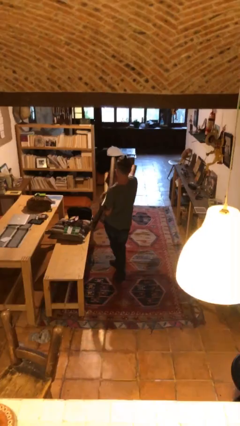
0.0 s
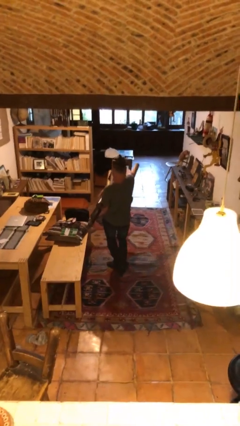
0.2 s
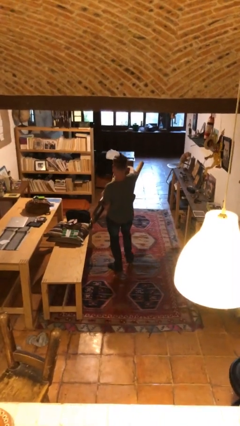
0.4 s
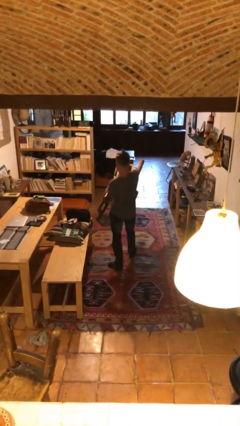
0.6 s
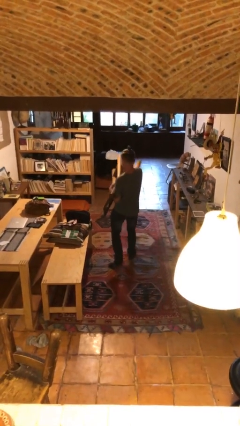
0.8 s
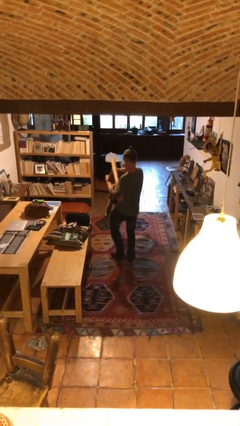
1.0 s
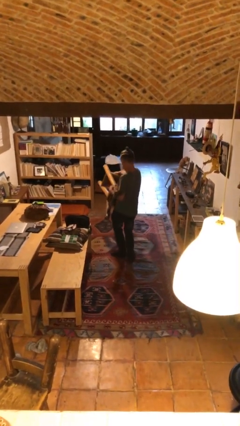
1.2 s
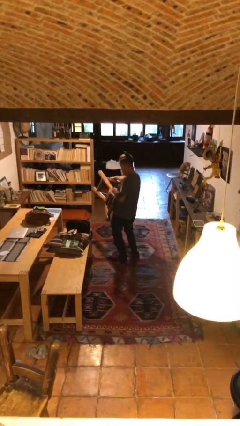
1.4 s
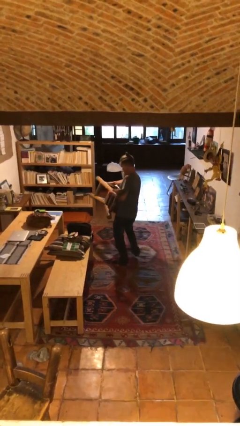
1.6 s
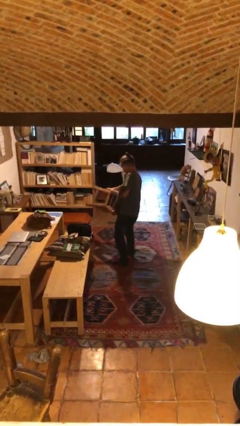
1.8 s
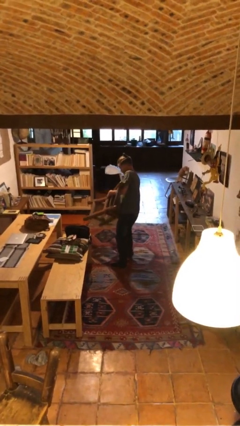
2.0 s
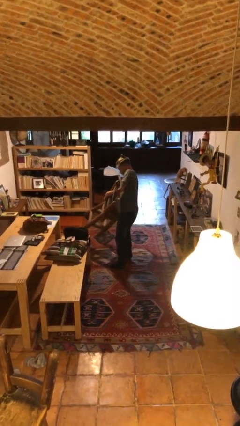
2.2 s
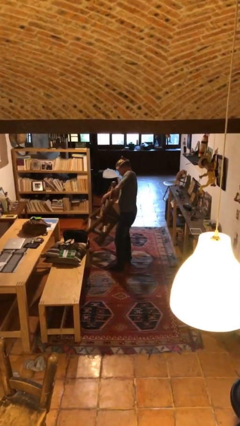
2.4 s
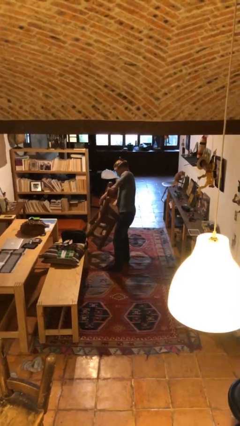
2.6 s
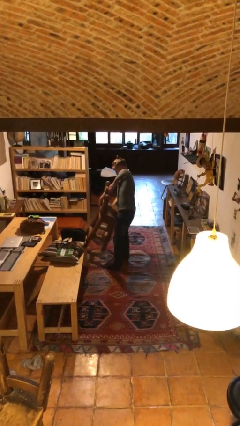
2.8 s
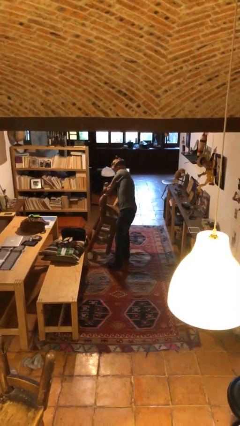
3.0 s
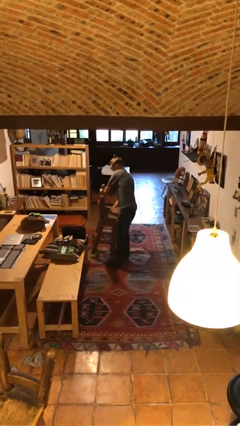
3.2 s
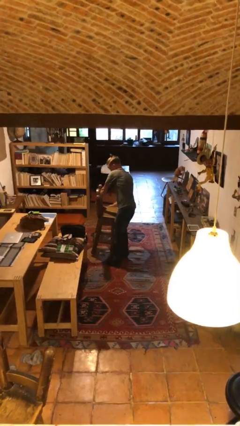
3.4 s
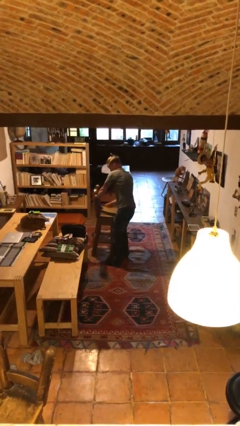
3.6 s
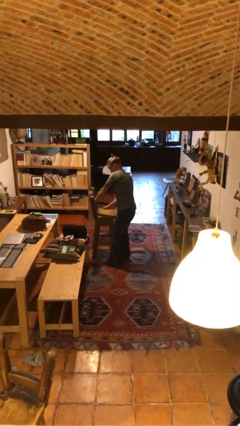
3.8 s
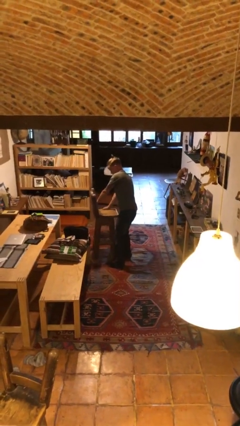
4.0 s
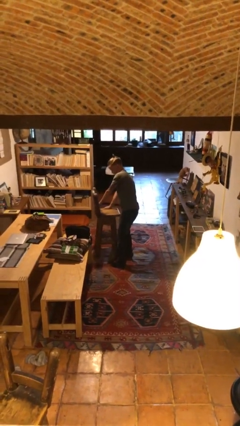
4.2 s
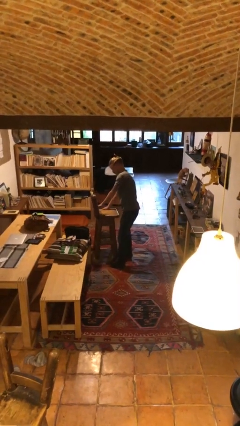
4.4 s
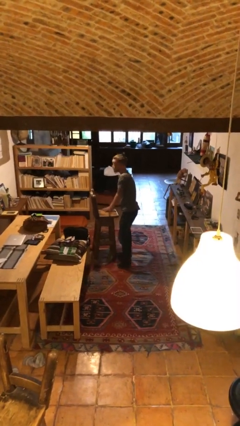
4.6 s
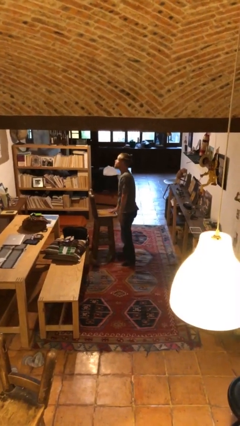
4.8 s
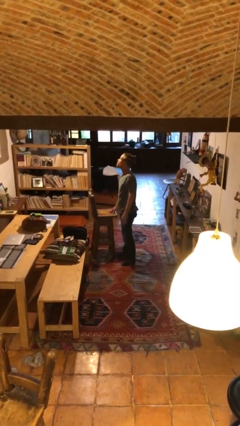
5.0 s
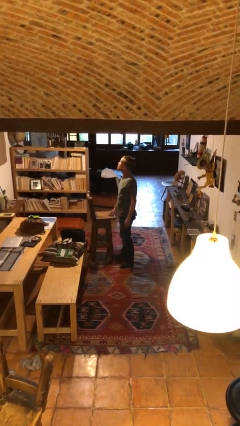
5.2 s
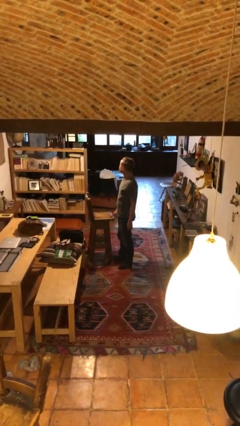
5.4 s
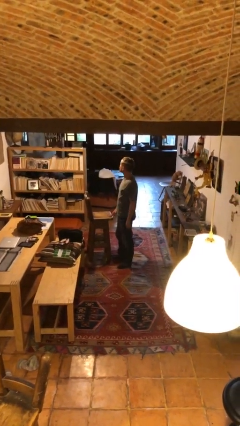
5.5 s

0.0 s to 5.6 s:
person puts down object on floor

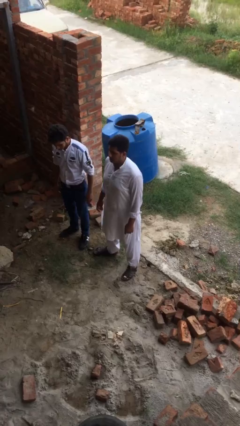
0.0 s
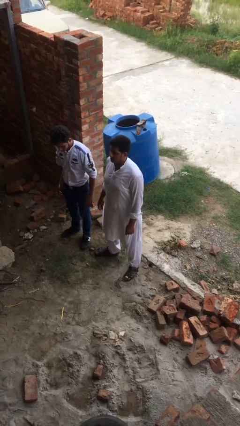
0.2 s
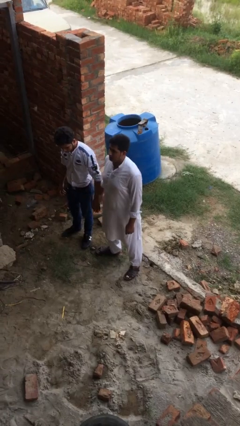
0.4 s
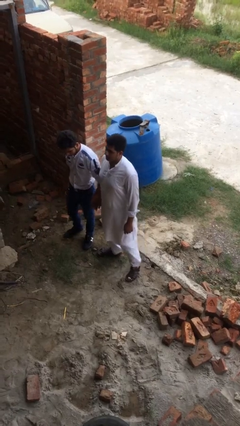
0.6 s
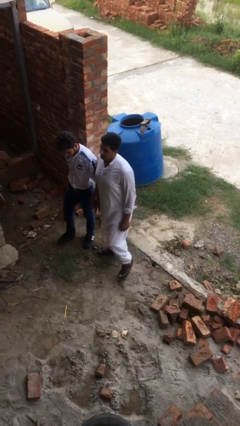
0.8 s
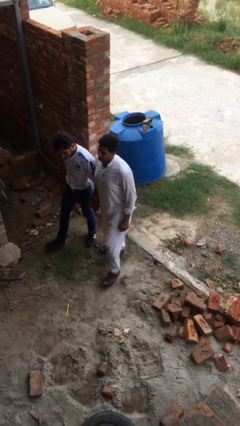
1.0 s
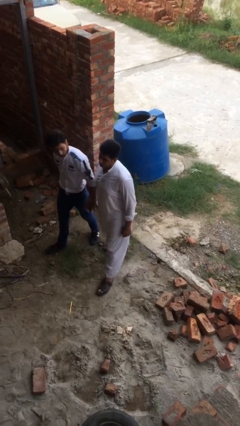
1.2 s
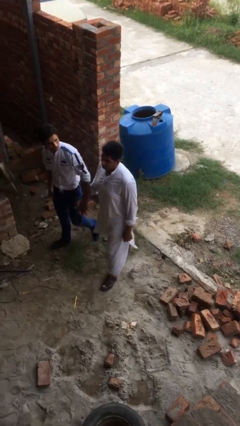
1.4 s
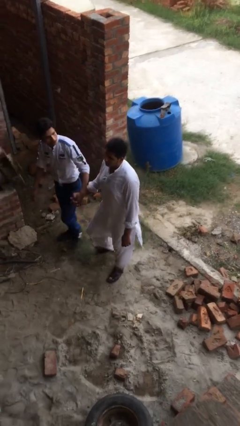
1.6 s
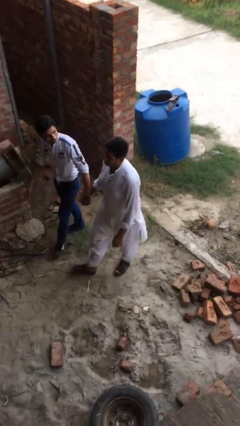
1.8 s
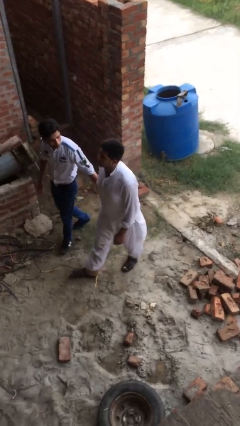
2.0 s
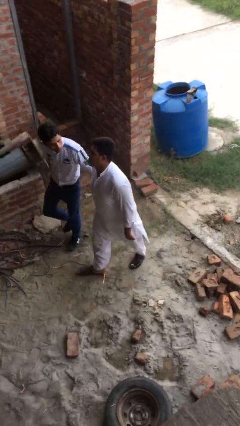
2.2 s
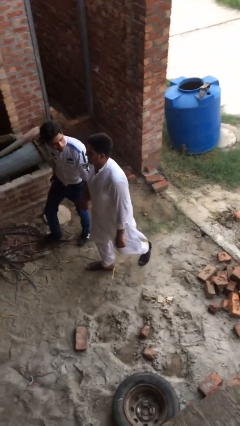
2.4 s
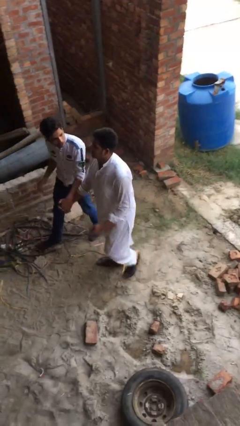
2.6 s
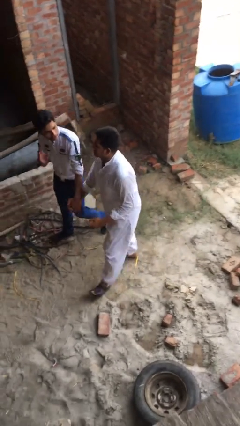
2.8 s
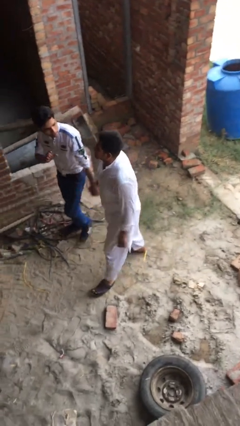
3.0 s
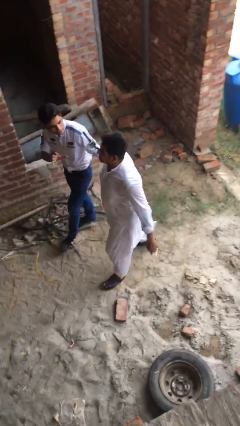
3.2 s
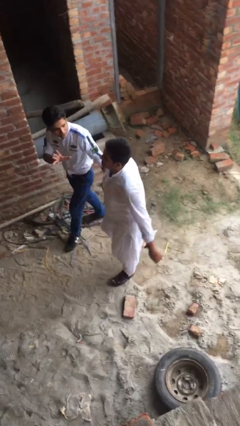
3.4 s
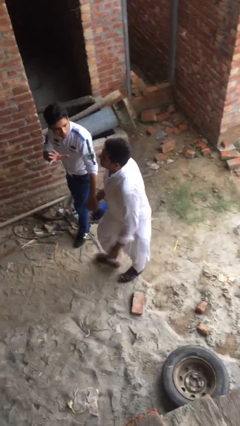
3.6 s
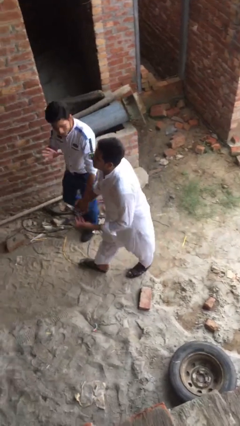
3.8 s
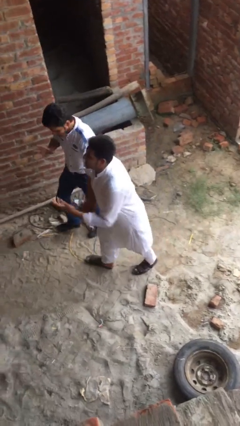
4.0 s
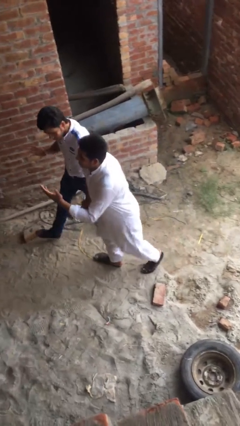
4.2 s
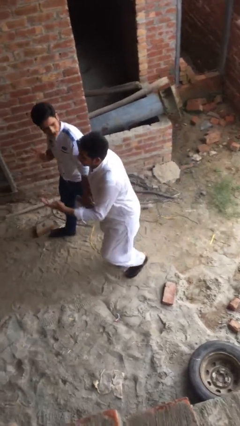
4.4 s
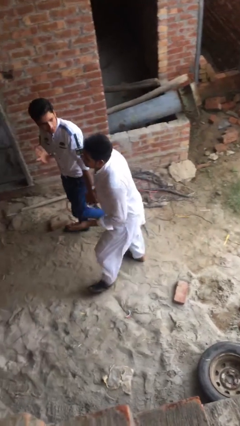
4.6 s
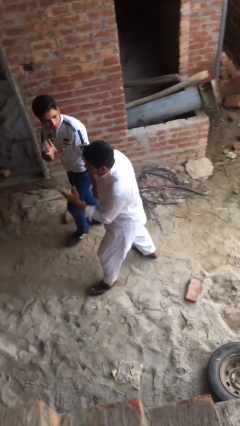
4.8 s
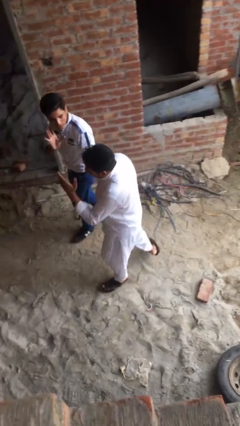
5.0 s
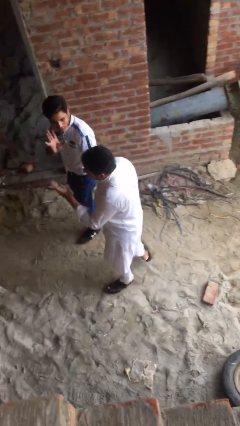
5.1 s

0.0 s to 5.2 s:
person holds hand

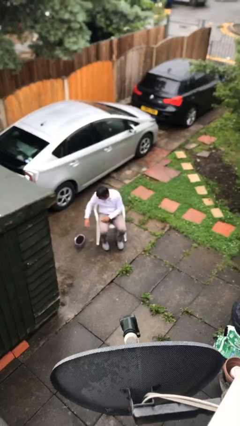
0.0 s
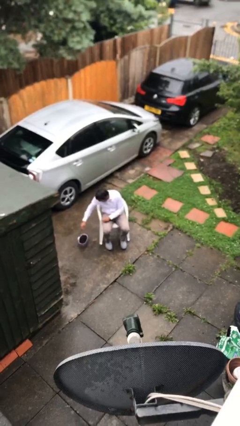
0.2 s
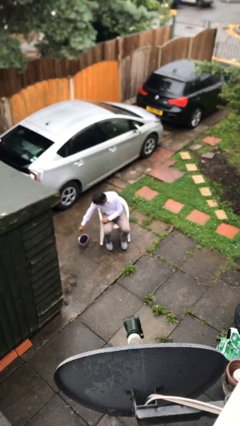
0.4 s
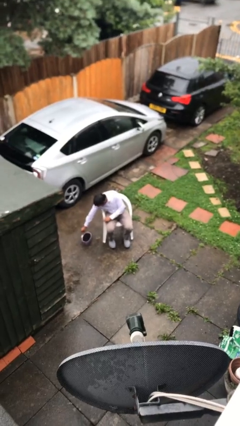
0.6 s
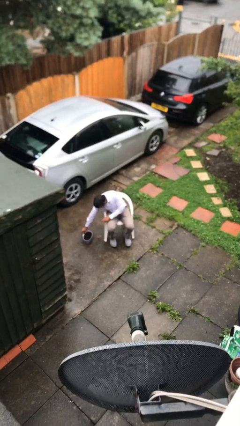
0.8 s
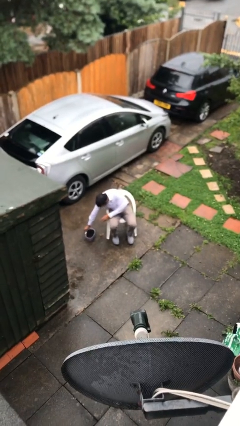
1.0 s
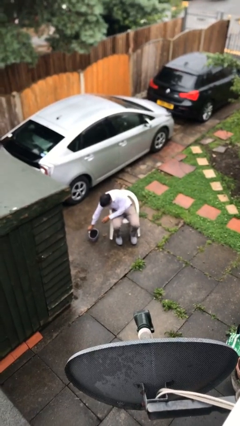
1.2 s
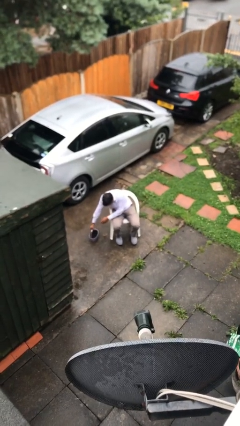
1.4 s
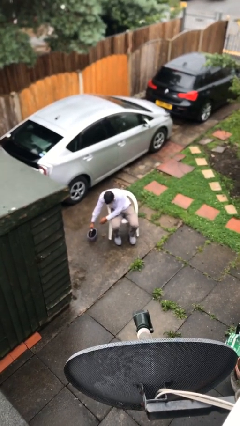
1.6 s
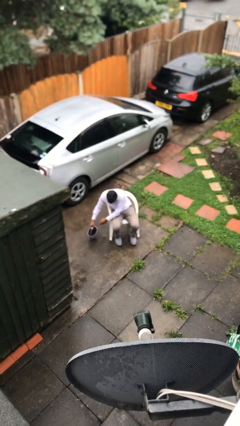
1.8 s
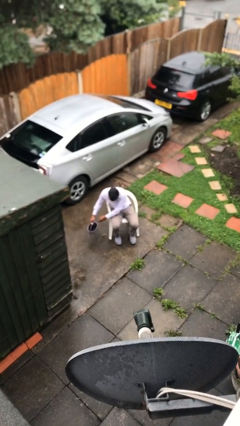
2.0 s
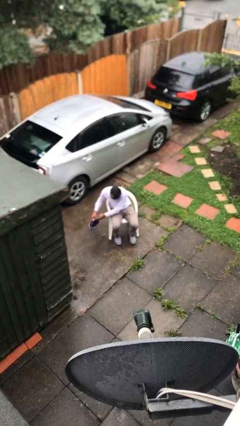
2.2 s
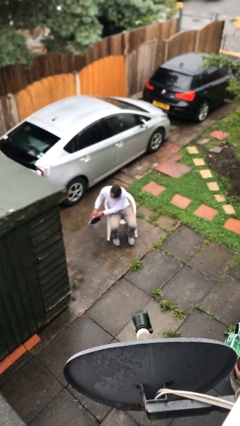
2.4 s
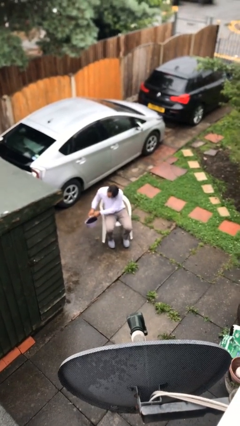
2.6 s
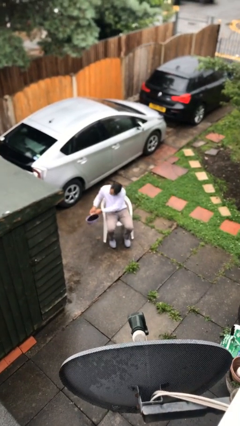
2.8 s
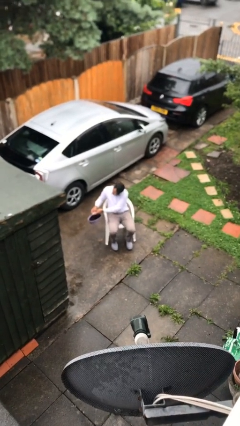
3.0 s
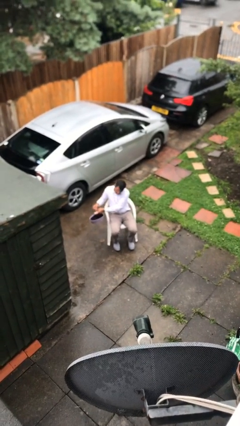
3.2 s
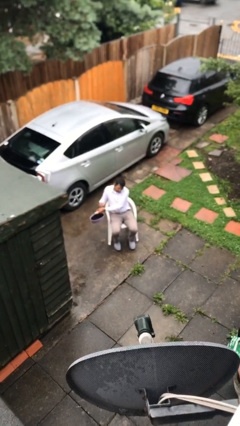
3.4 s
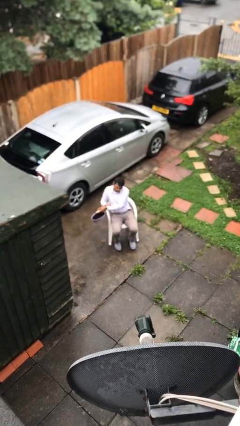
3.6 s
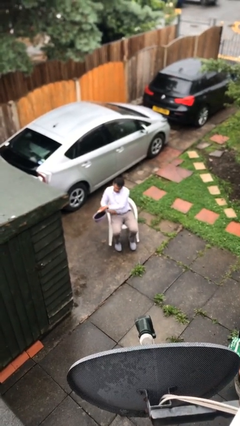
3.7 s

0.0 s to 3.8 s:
person picks up object from floor

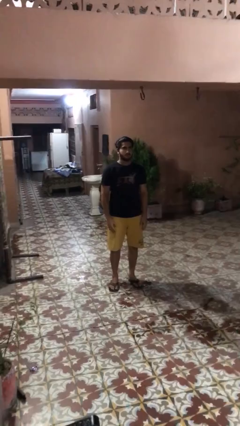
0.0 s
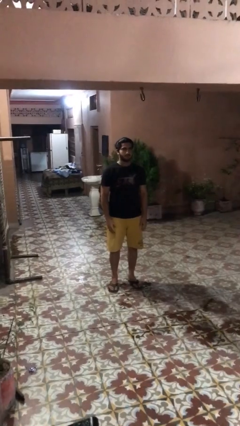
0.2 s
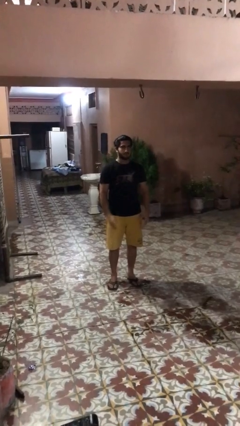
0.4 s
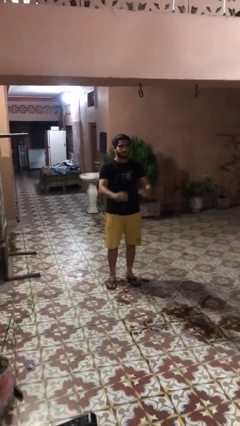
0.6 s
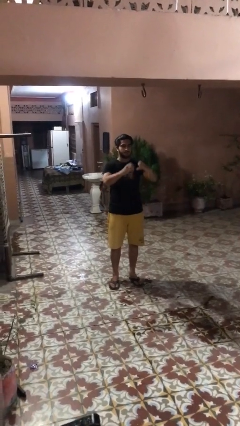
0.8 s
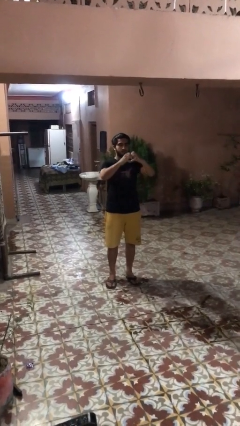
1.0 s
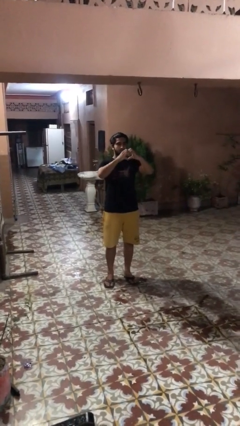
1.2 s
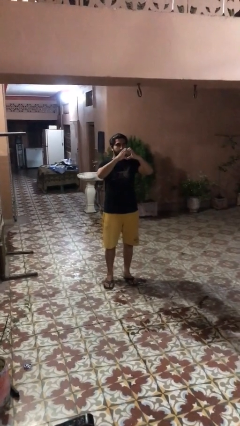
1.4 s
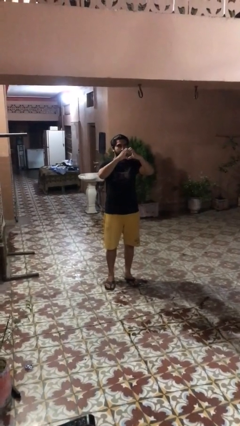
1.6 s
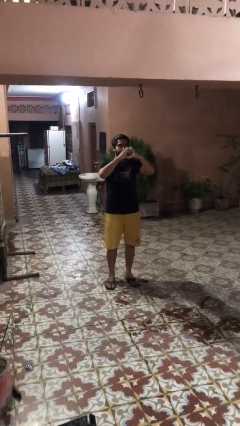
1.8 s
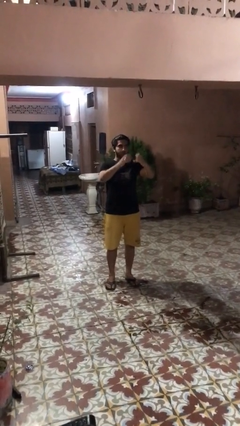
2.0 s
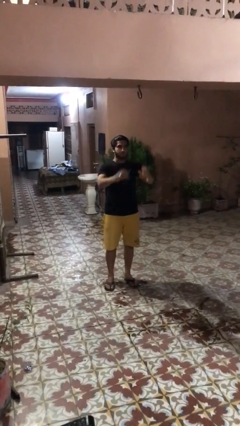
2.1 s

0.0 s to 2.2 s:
person gestures heart

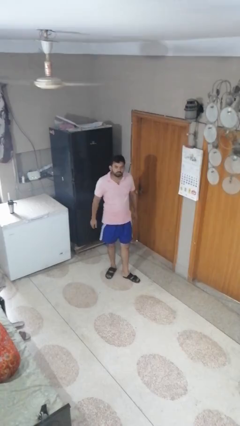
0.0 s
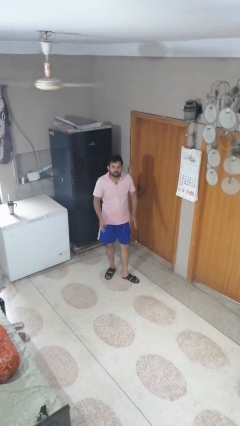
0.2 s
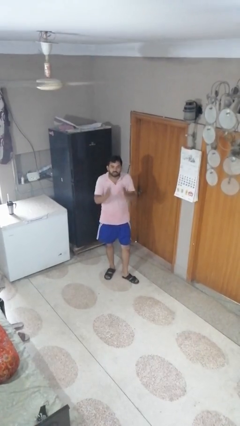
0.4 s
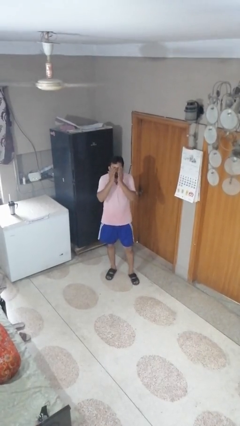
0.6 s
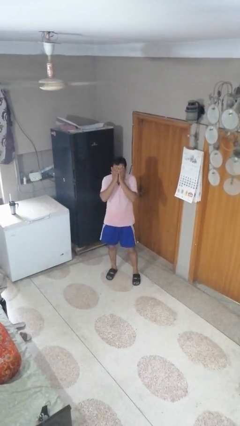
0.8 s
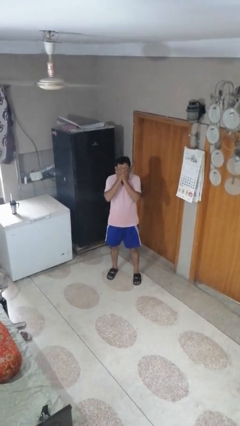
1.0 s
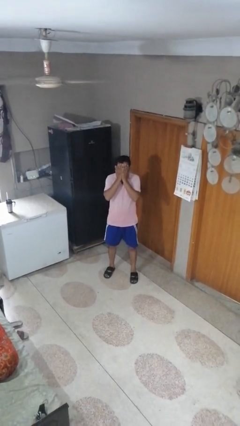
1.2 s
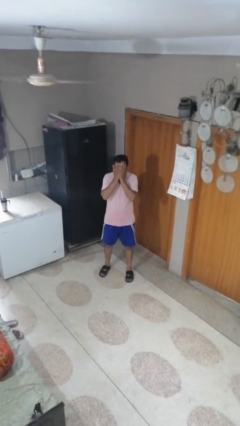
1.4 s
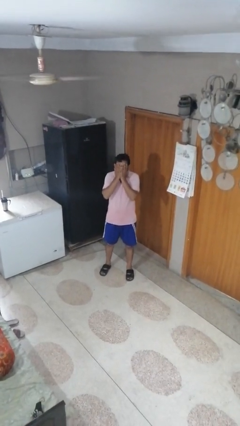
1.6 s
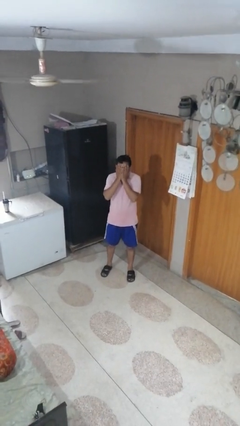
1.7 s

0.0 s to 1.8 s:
person covers face with hands
